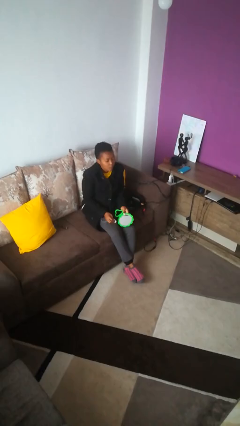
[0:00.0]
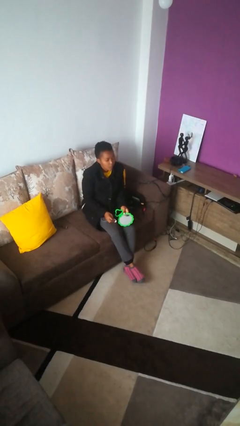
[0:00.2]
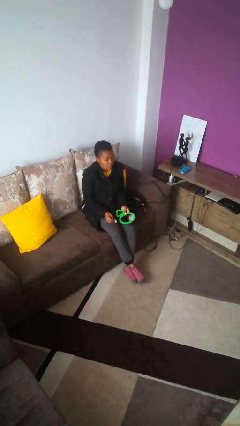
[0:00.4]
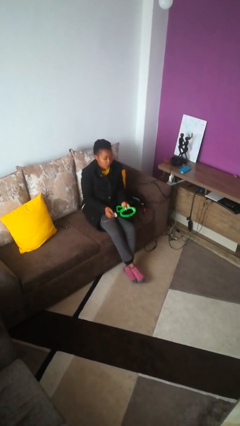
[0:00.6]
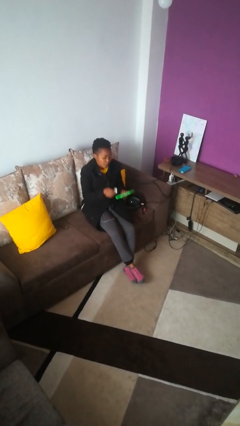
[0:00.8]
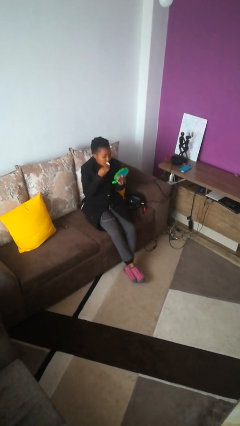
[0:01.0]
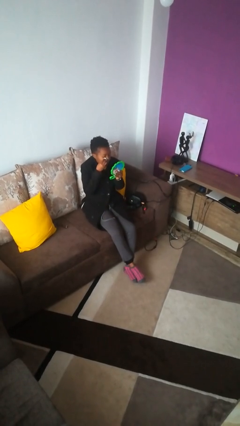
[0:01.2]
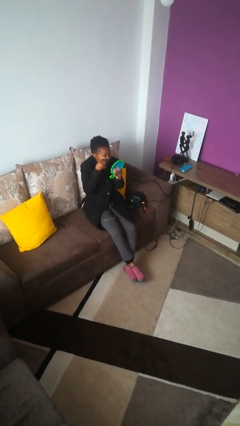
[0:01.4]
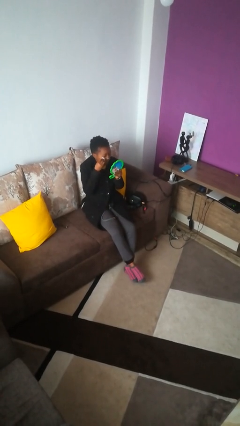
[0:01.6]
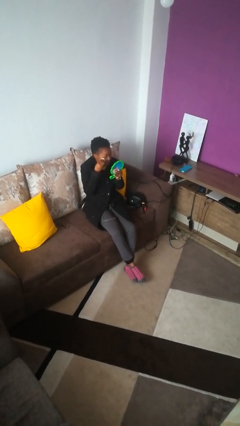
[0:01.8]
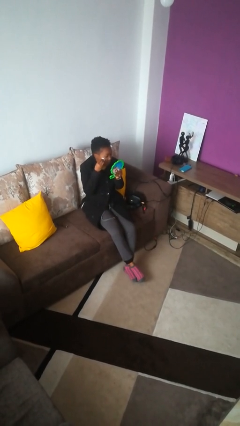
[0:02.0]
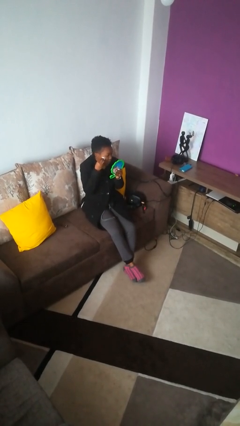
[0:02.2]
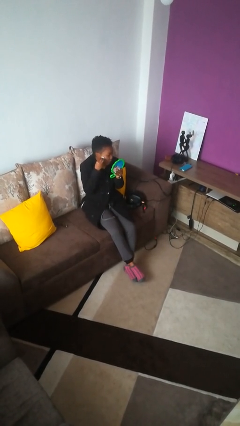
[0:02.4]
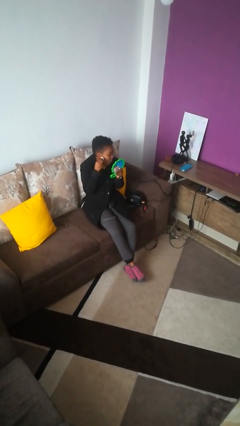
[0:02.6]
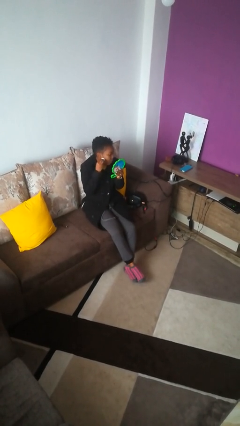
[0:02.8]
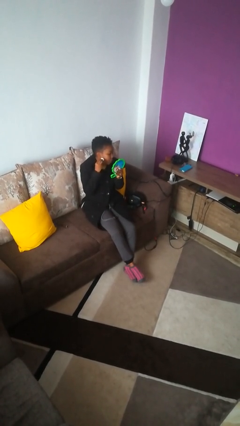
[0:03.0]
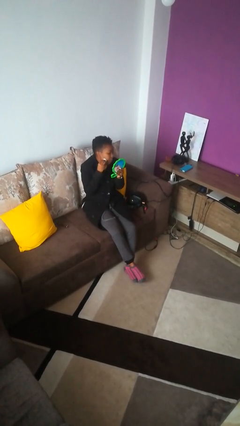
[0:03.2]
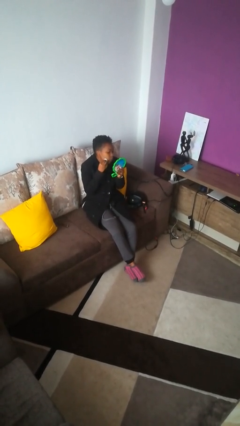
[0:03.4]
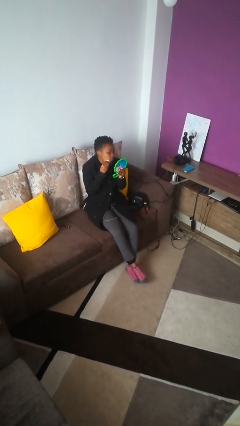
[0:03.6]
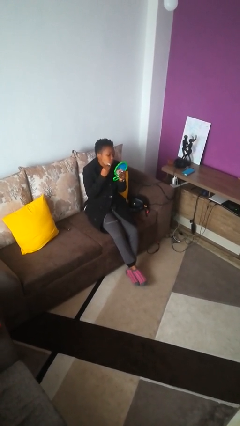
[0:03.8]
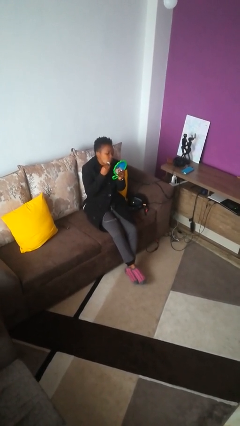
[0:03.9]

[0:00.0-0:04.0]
person applies foundation makeup

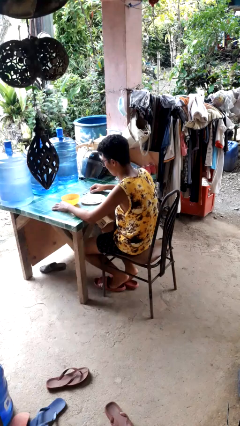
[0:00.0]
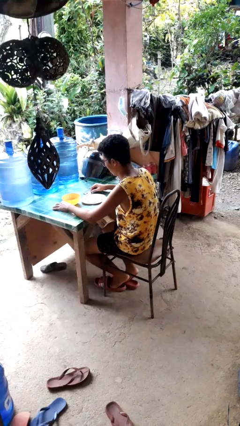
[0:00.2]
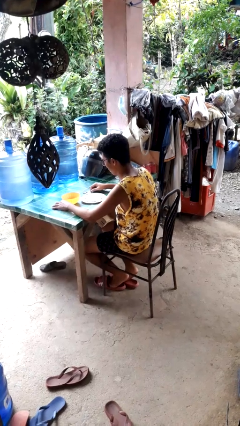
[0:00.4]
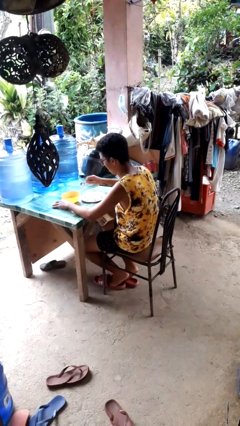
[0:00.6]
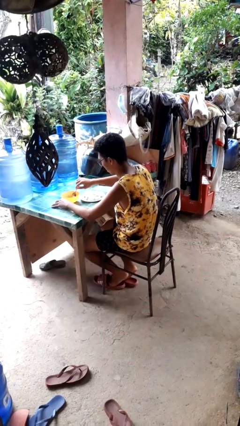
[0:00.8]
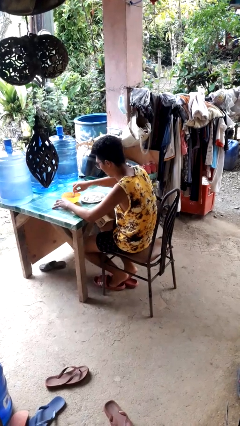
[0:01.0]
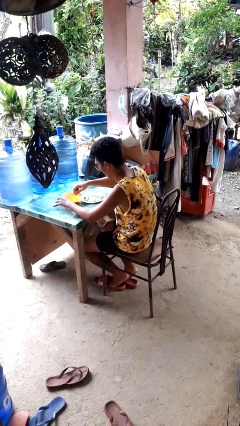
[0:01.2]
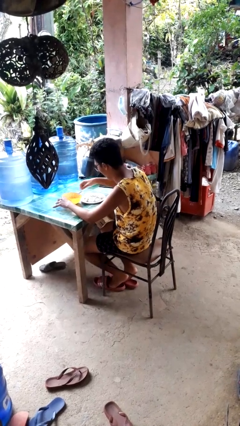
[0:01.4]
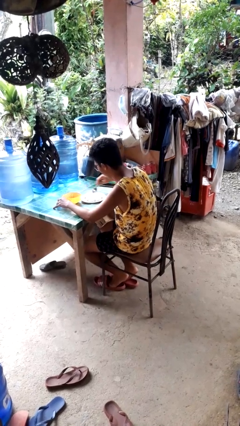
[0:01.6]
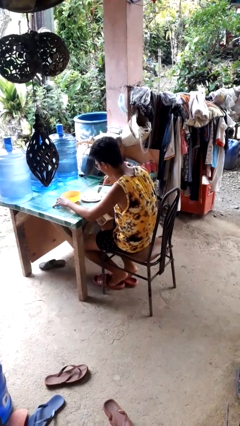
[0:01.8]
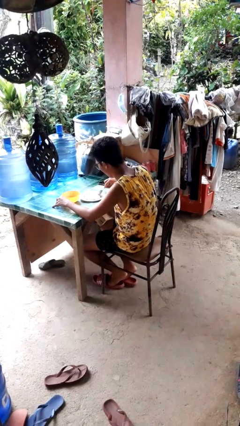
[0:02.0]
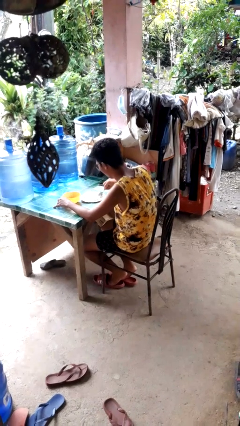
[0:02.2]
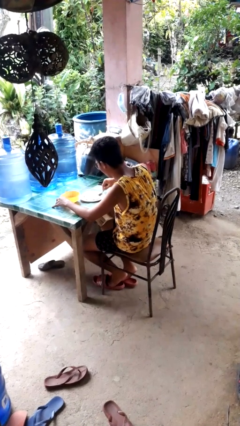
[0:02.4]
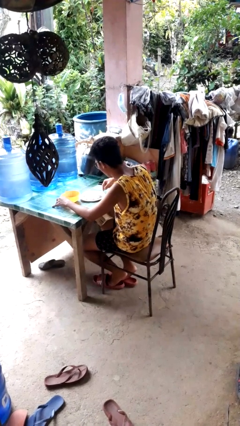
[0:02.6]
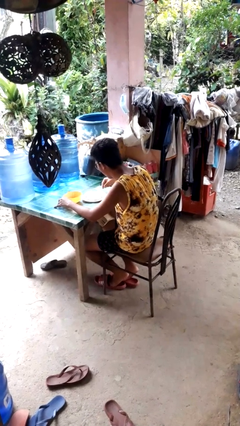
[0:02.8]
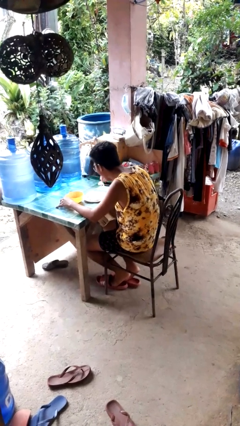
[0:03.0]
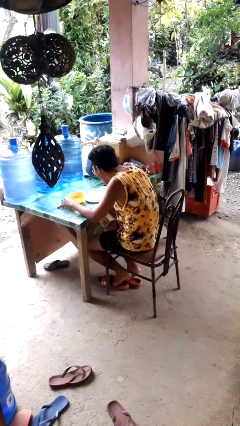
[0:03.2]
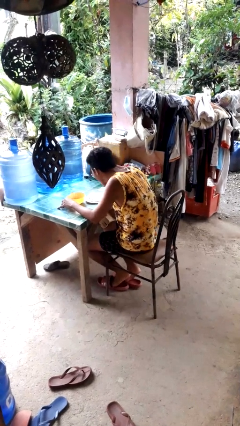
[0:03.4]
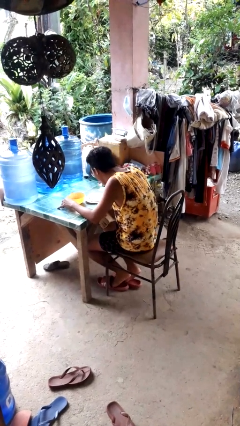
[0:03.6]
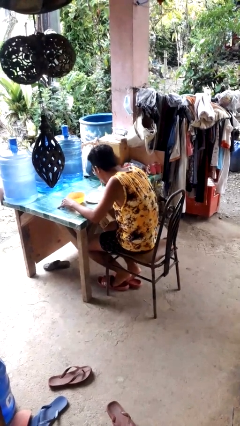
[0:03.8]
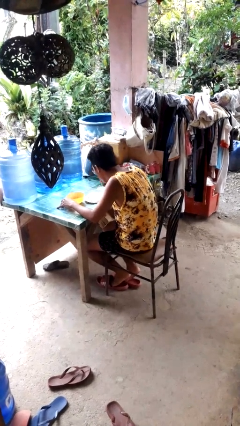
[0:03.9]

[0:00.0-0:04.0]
person eats with utensil

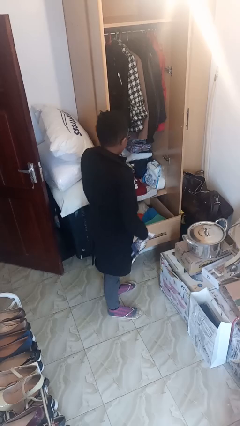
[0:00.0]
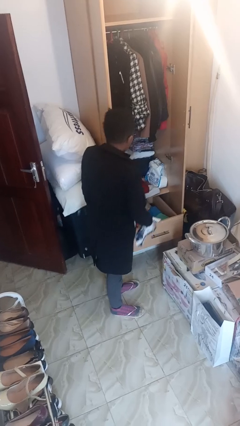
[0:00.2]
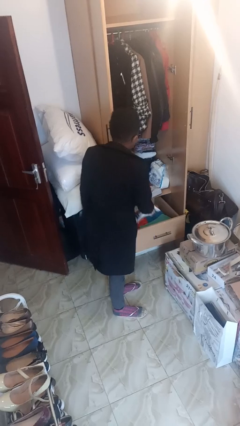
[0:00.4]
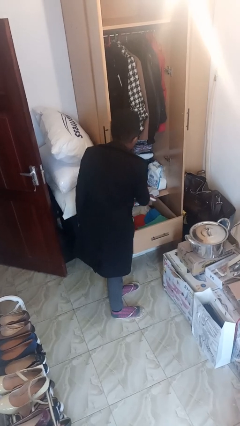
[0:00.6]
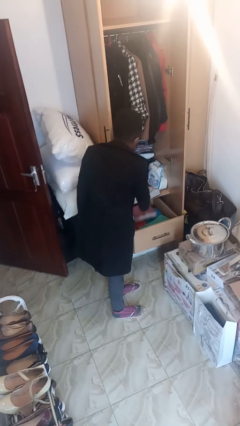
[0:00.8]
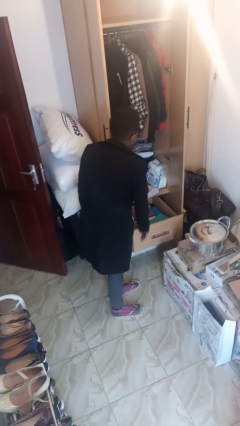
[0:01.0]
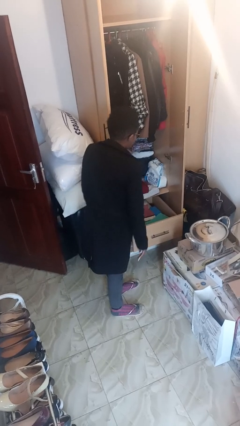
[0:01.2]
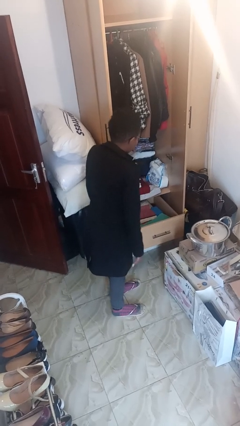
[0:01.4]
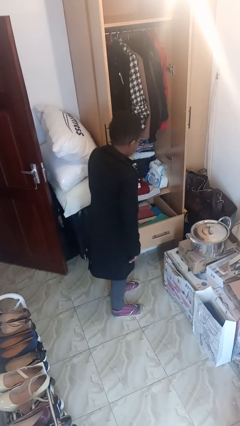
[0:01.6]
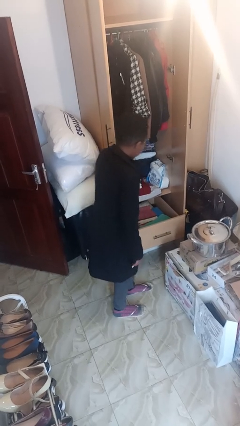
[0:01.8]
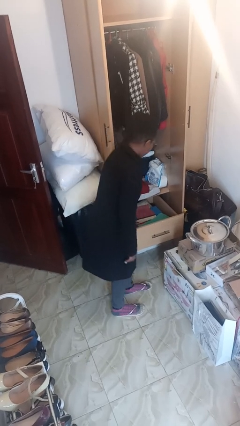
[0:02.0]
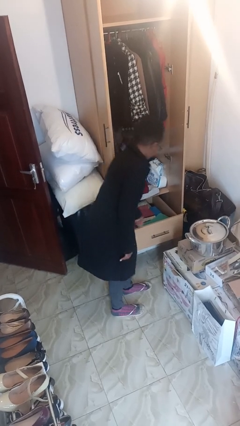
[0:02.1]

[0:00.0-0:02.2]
person puts clothes into dresser

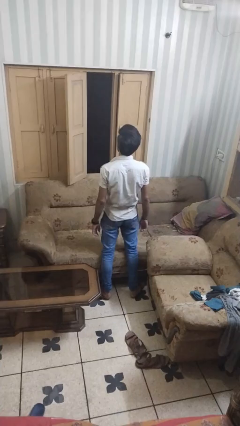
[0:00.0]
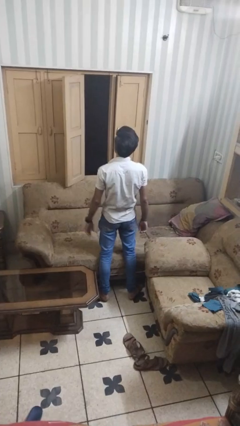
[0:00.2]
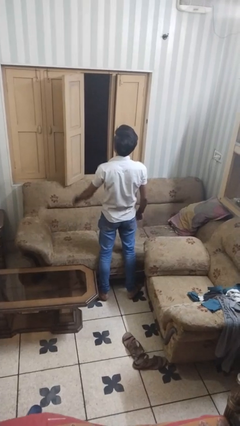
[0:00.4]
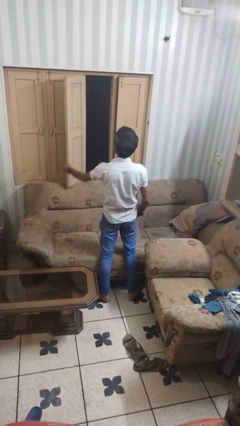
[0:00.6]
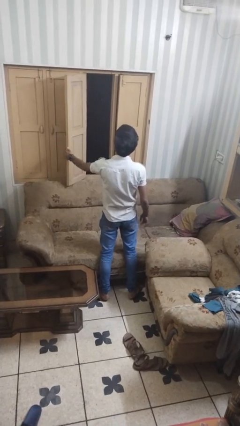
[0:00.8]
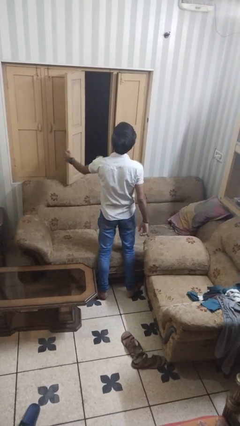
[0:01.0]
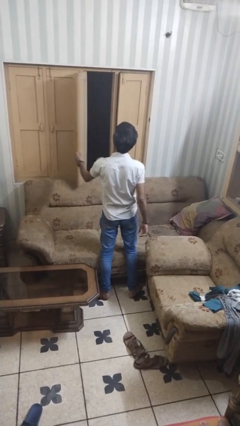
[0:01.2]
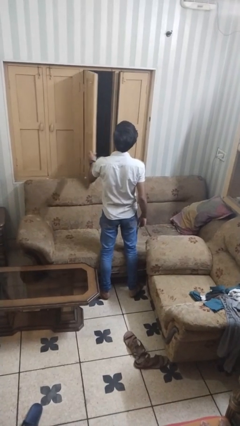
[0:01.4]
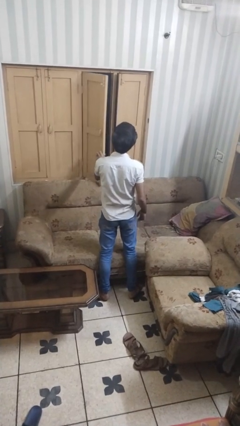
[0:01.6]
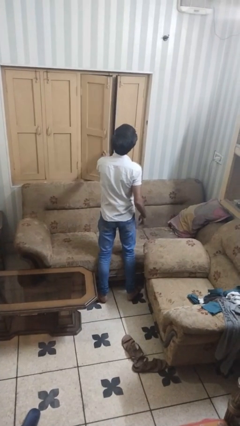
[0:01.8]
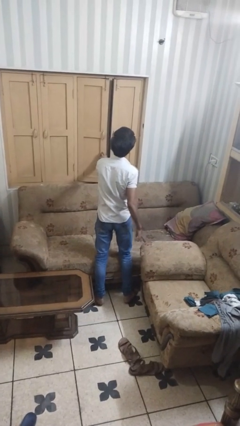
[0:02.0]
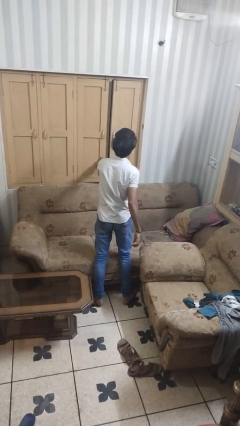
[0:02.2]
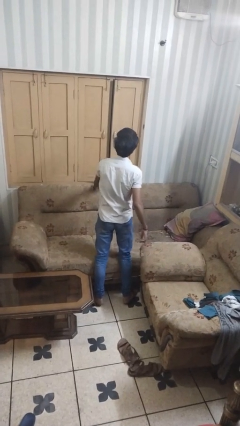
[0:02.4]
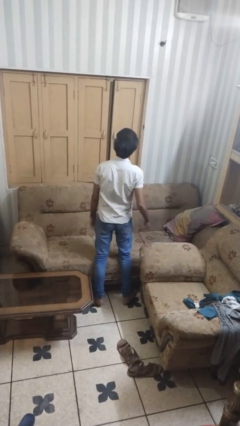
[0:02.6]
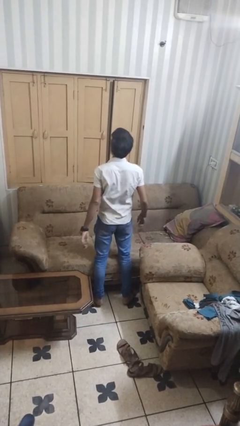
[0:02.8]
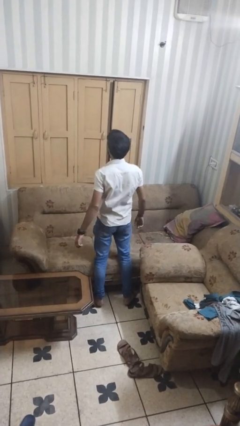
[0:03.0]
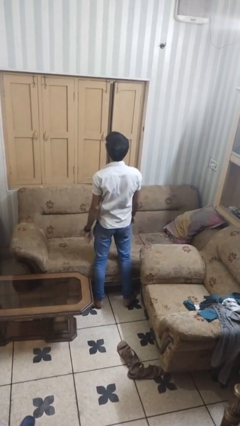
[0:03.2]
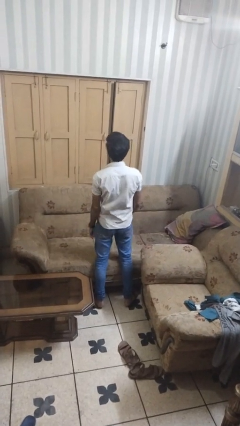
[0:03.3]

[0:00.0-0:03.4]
person closes home window

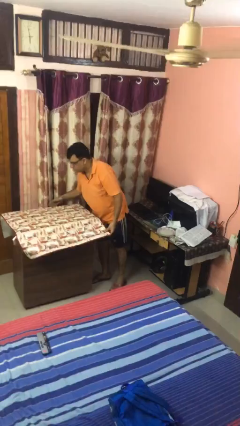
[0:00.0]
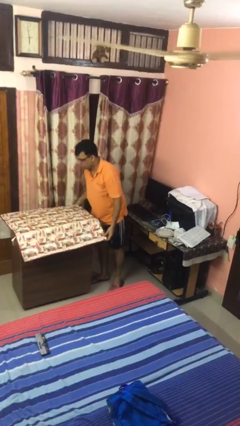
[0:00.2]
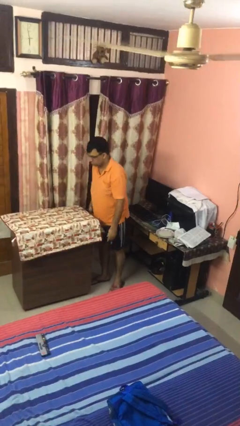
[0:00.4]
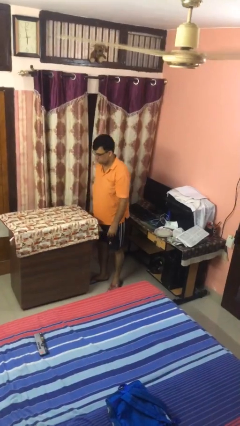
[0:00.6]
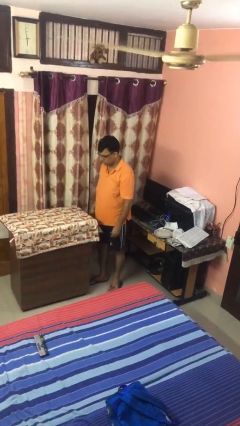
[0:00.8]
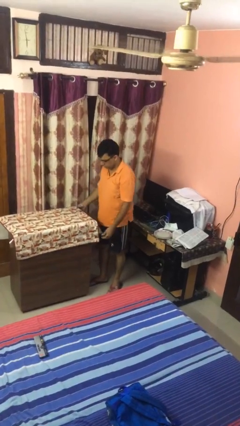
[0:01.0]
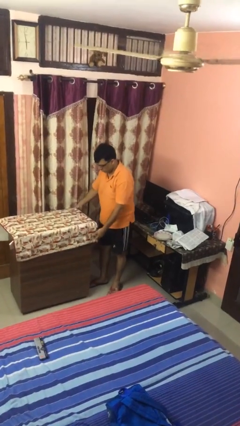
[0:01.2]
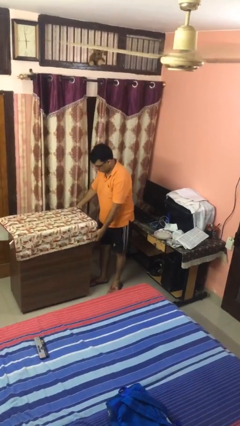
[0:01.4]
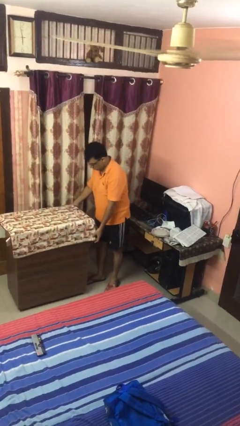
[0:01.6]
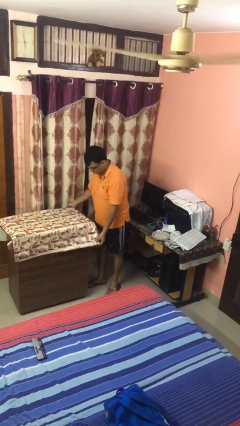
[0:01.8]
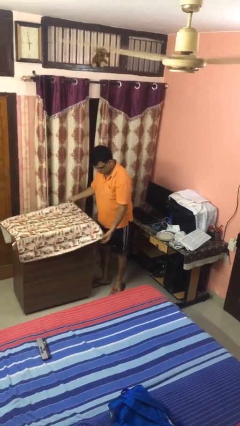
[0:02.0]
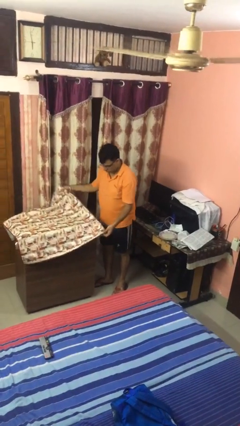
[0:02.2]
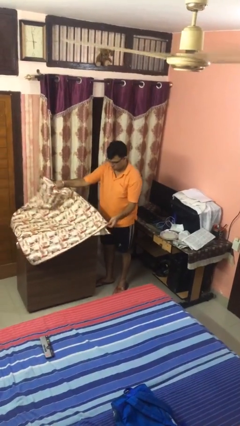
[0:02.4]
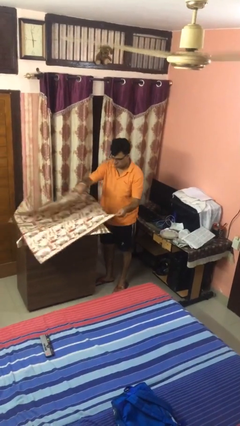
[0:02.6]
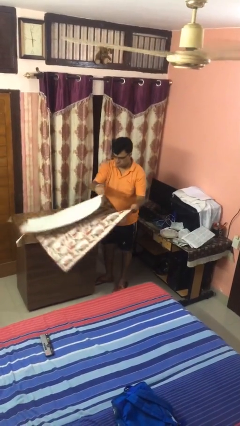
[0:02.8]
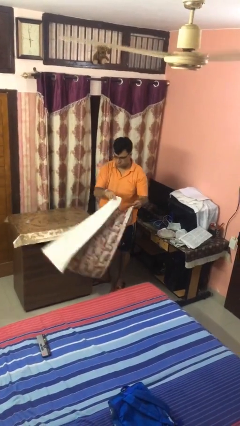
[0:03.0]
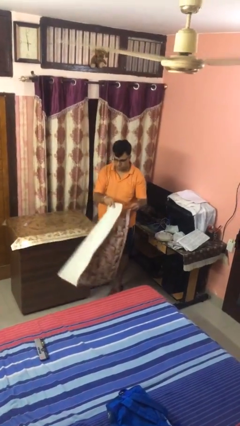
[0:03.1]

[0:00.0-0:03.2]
person folds tablecloth

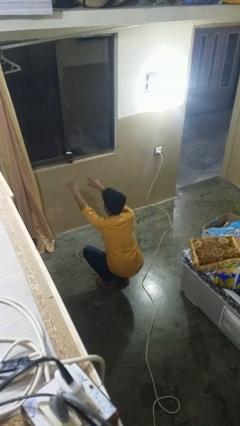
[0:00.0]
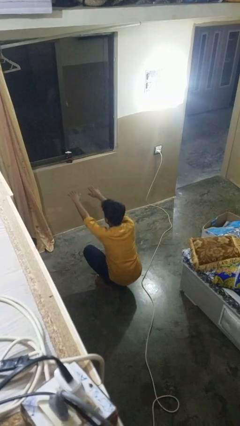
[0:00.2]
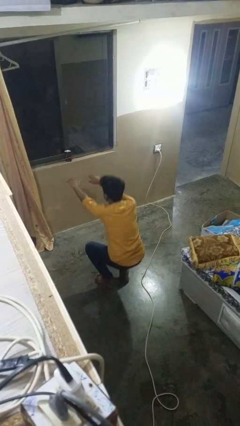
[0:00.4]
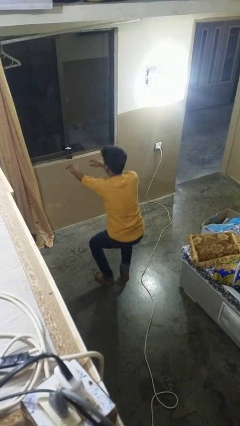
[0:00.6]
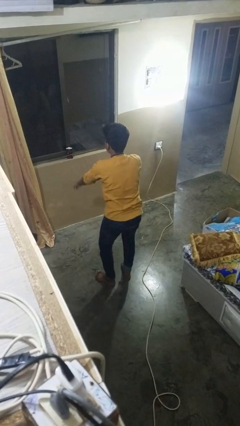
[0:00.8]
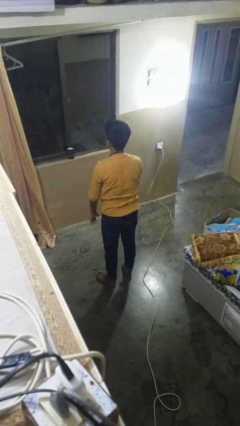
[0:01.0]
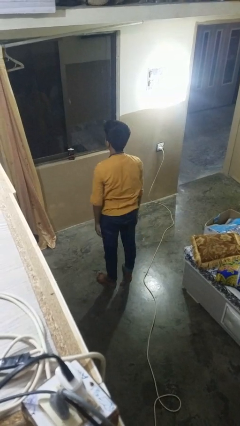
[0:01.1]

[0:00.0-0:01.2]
person stands up
